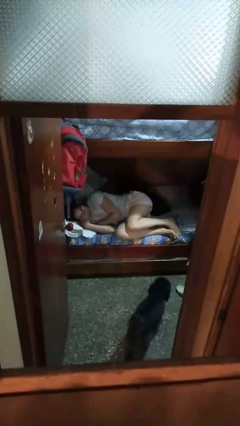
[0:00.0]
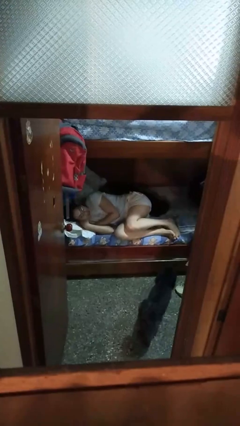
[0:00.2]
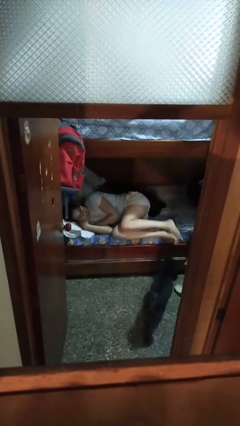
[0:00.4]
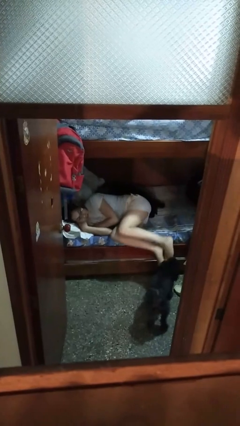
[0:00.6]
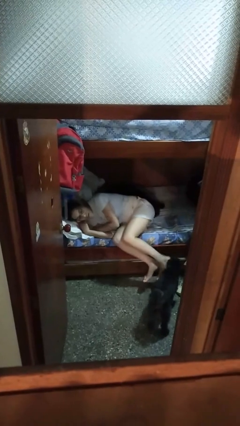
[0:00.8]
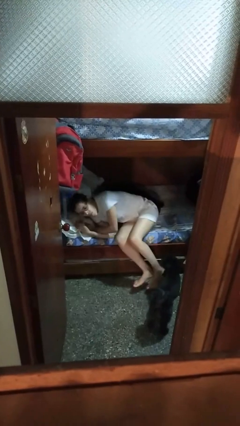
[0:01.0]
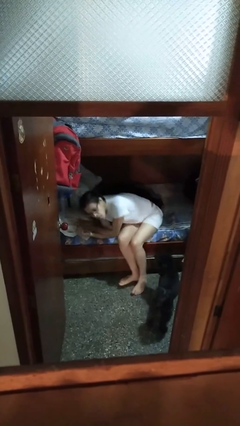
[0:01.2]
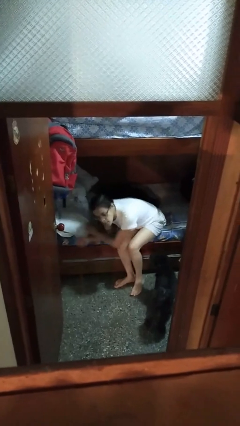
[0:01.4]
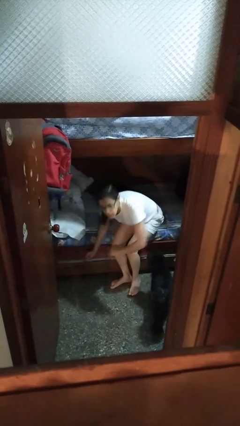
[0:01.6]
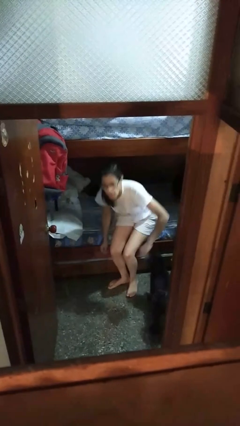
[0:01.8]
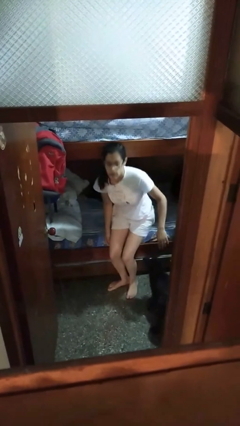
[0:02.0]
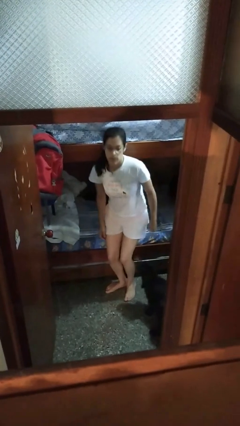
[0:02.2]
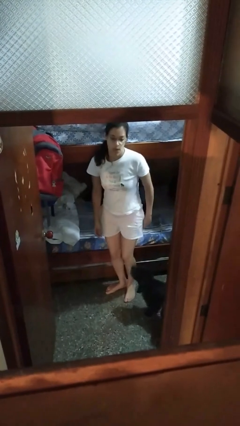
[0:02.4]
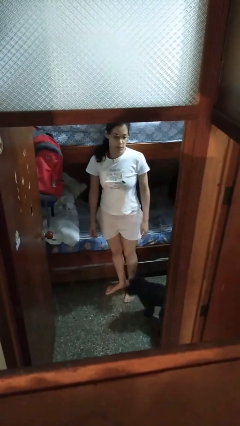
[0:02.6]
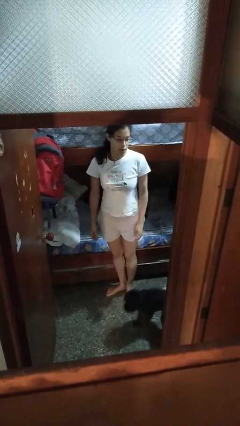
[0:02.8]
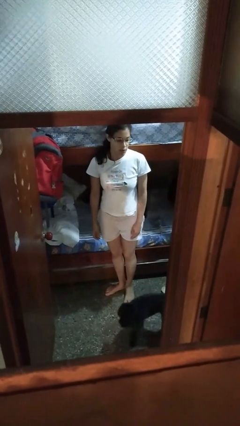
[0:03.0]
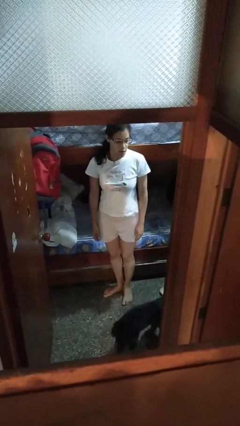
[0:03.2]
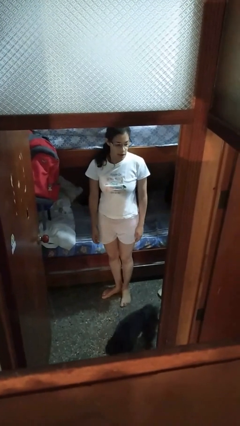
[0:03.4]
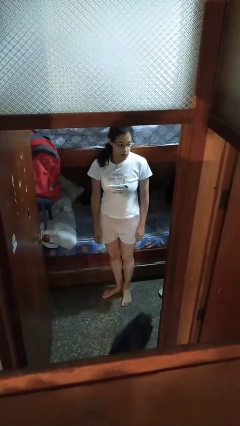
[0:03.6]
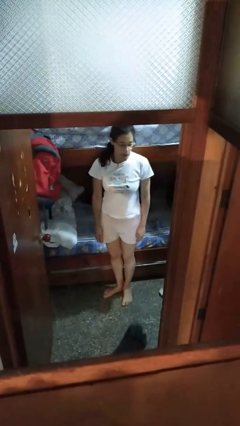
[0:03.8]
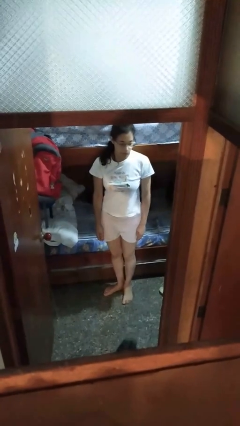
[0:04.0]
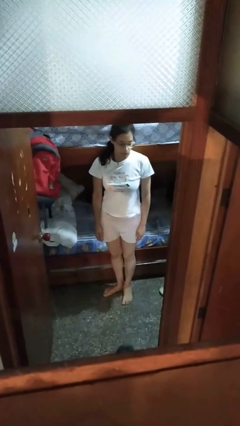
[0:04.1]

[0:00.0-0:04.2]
person stands up

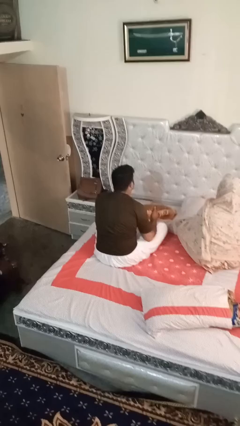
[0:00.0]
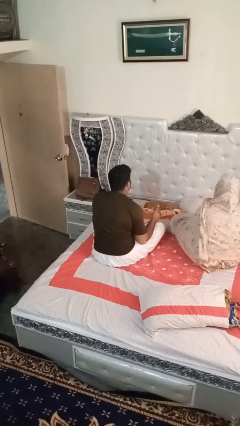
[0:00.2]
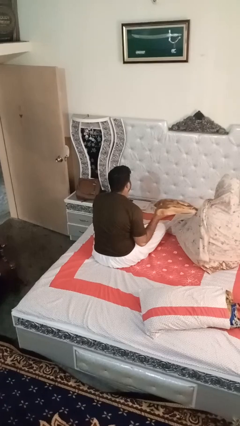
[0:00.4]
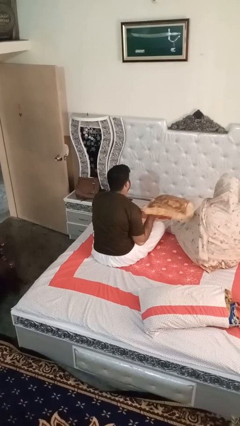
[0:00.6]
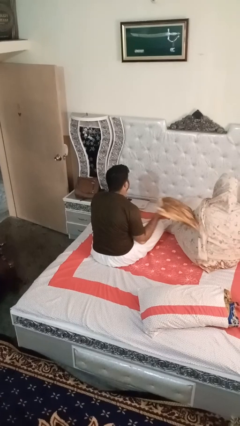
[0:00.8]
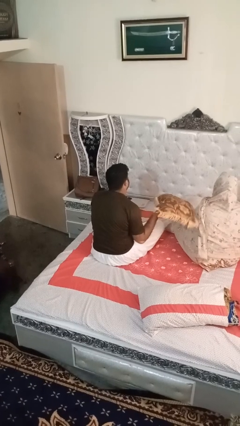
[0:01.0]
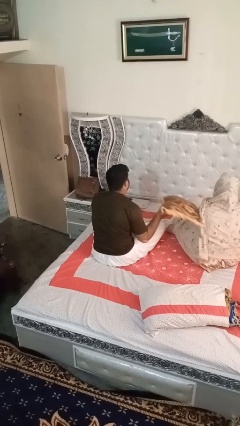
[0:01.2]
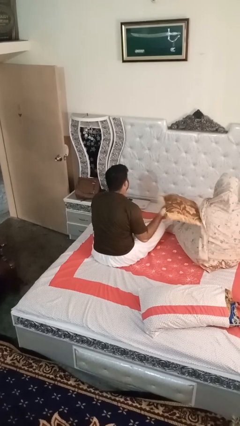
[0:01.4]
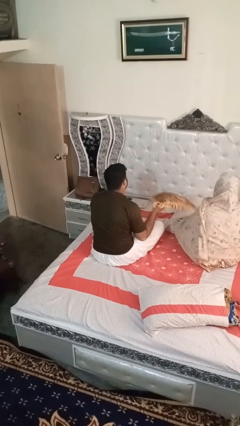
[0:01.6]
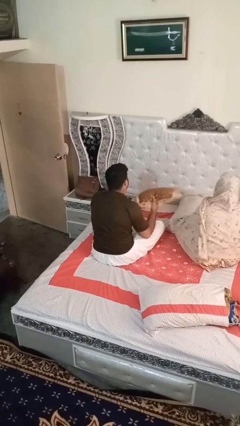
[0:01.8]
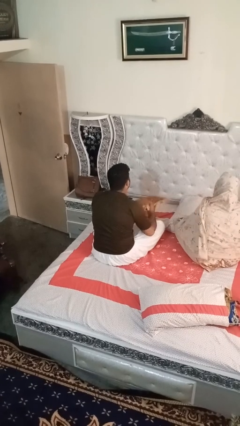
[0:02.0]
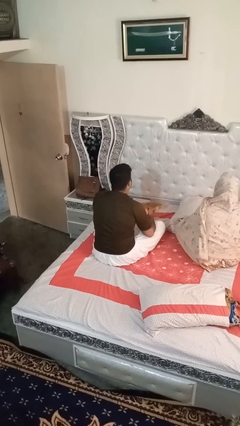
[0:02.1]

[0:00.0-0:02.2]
person hits person with pillow

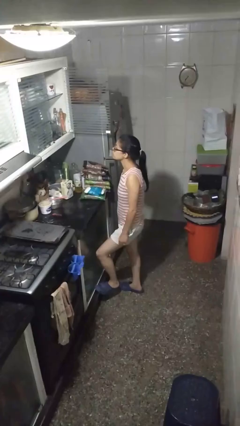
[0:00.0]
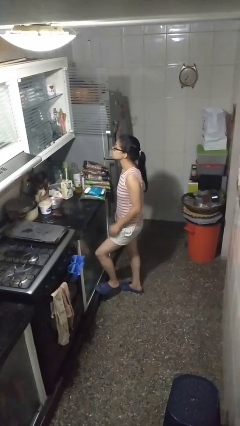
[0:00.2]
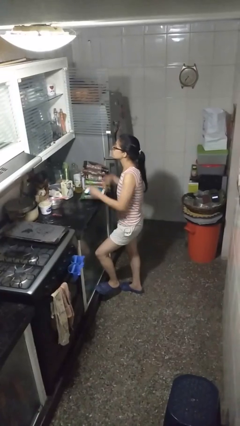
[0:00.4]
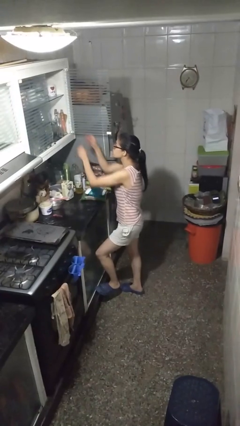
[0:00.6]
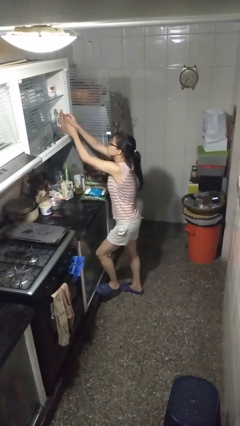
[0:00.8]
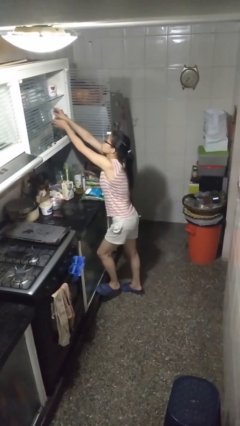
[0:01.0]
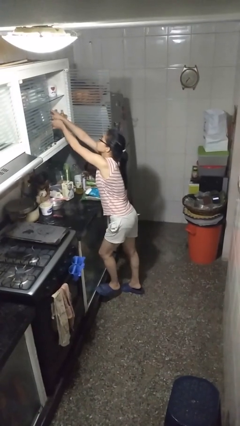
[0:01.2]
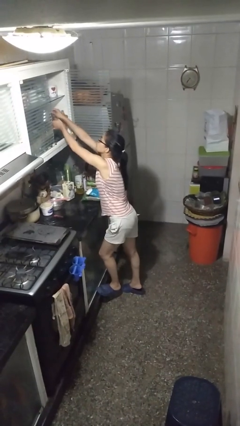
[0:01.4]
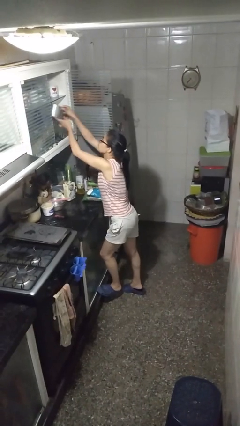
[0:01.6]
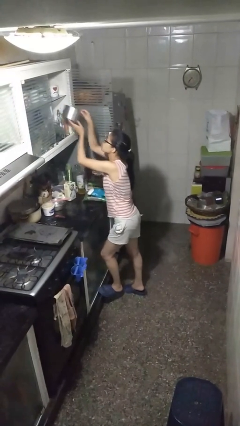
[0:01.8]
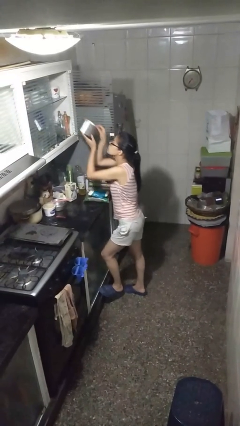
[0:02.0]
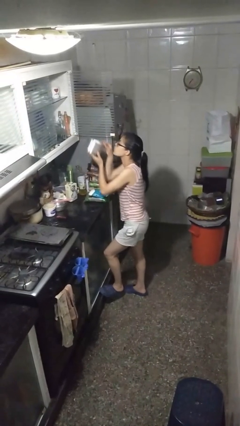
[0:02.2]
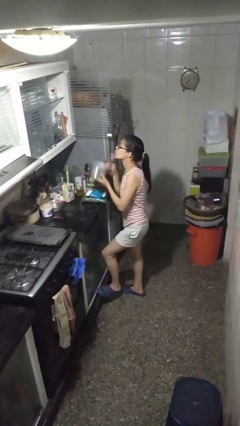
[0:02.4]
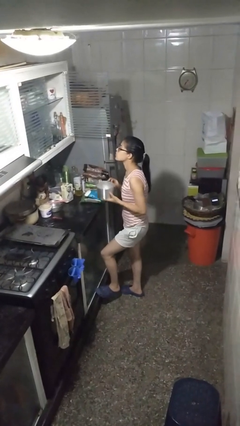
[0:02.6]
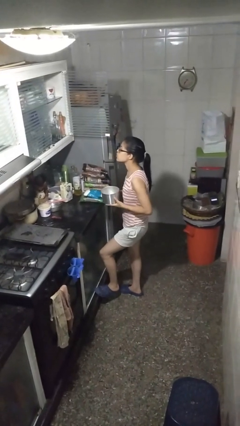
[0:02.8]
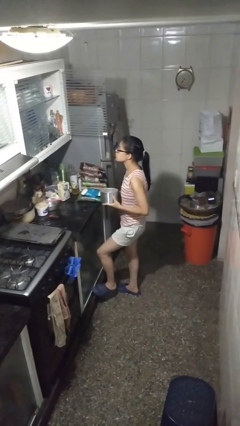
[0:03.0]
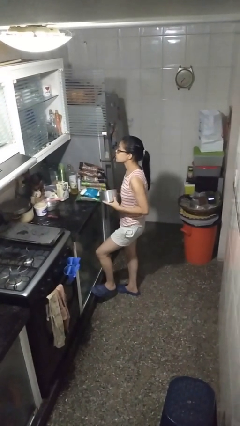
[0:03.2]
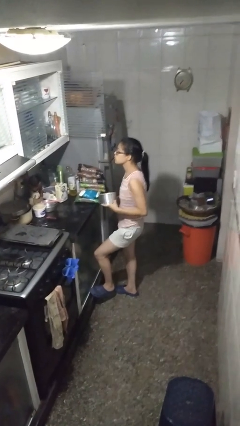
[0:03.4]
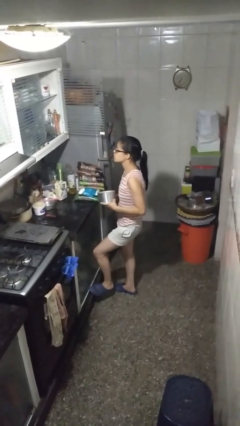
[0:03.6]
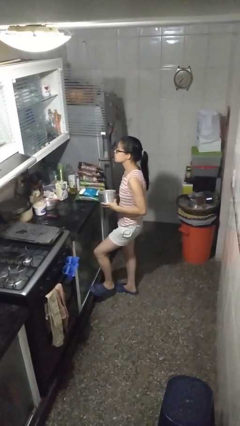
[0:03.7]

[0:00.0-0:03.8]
person picks up object from cabinet

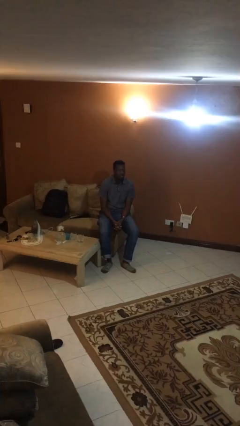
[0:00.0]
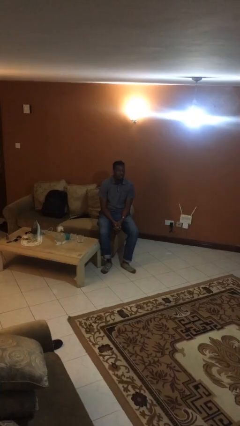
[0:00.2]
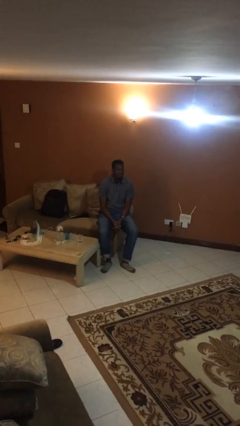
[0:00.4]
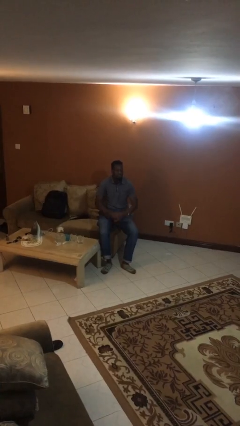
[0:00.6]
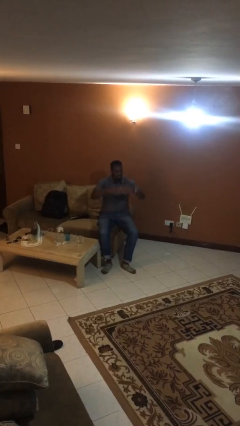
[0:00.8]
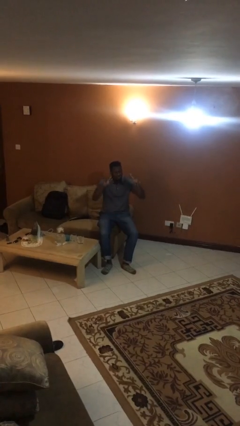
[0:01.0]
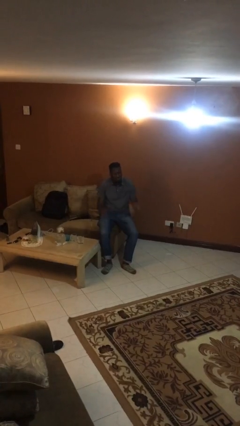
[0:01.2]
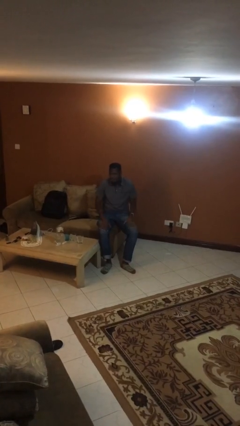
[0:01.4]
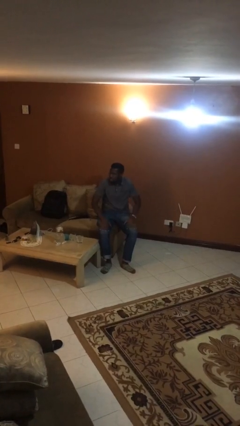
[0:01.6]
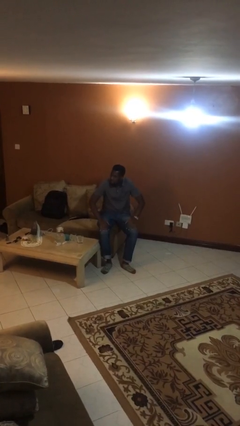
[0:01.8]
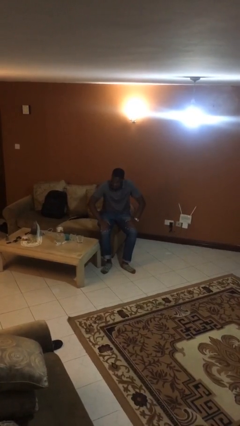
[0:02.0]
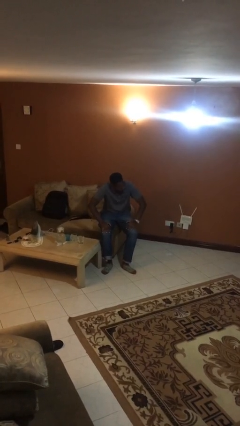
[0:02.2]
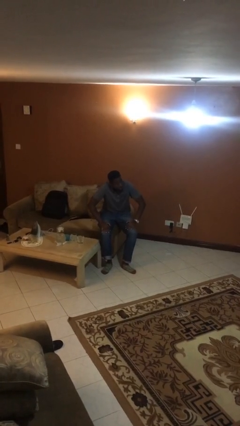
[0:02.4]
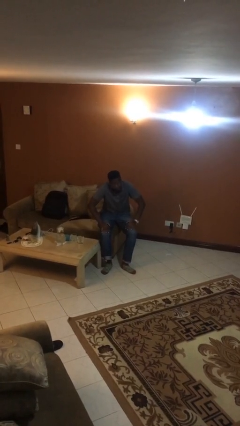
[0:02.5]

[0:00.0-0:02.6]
person slaps hands on thighs

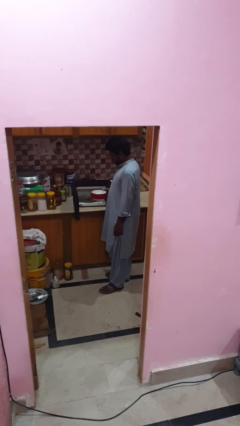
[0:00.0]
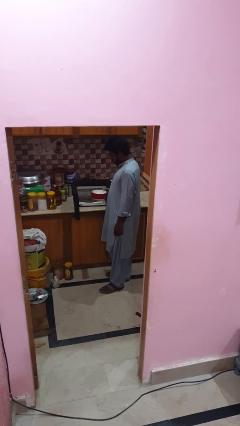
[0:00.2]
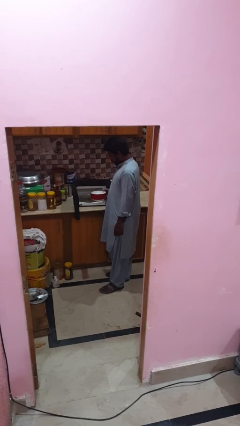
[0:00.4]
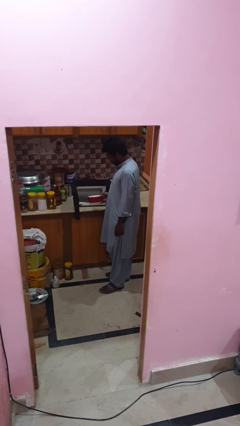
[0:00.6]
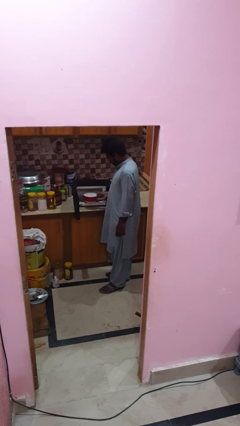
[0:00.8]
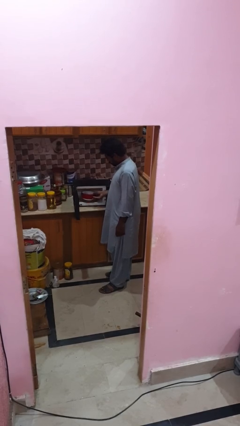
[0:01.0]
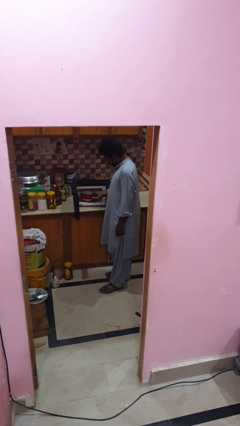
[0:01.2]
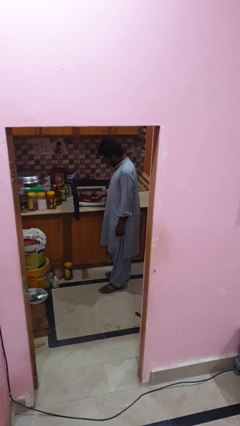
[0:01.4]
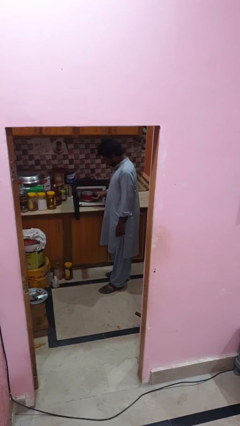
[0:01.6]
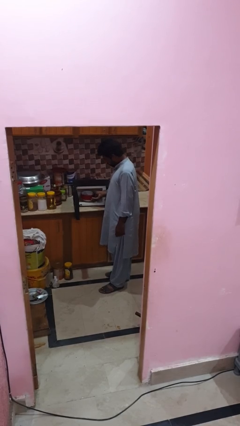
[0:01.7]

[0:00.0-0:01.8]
person puts object into microwave

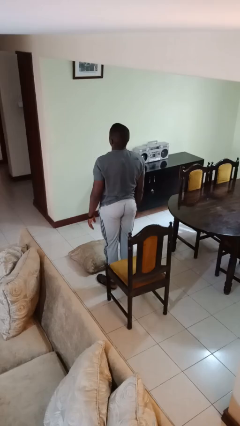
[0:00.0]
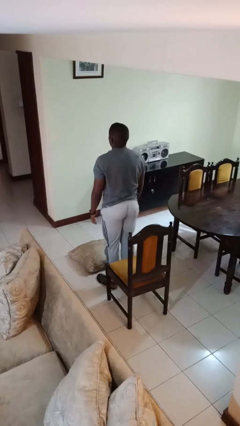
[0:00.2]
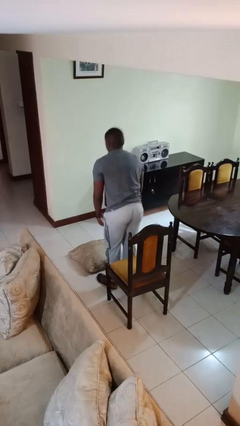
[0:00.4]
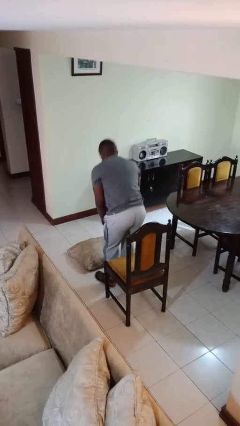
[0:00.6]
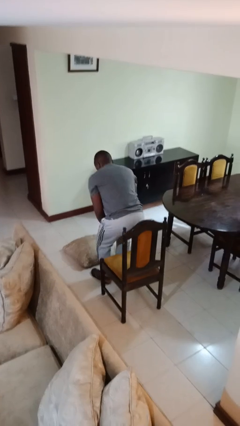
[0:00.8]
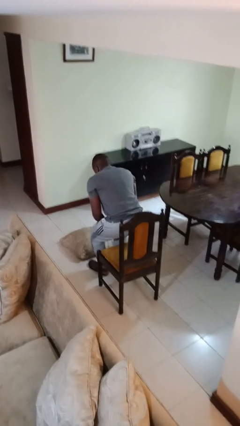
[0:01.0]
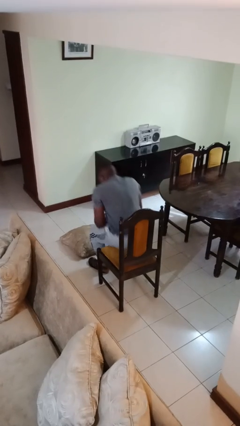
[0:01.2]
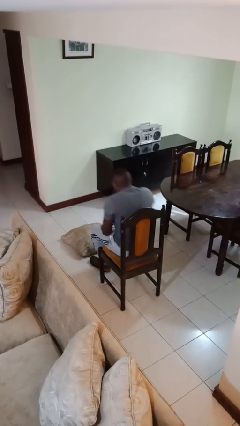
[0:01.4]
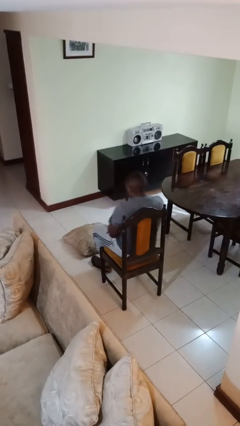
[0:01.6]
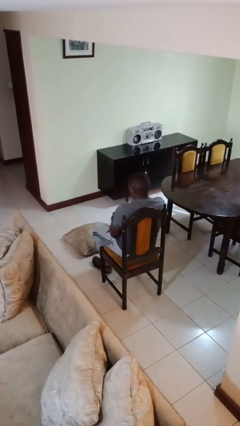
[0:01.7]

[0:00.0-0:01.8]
person sits down

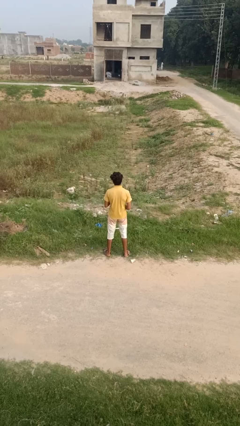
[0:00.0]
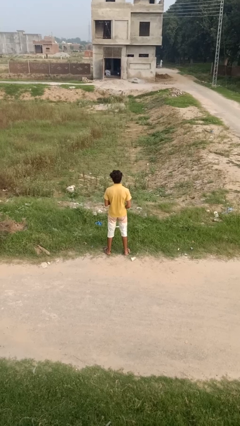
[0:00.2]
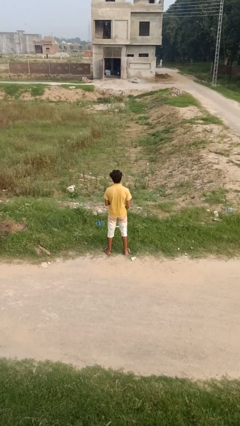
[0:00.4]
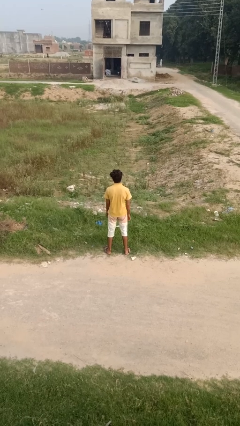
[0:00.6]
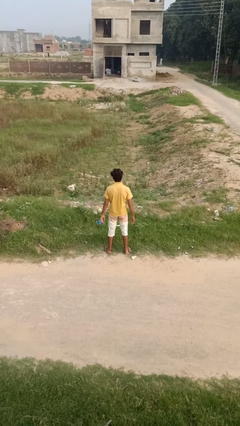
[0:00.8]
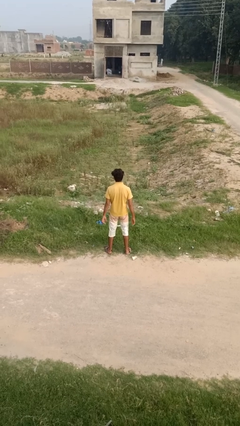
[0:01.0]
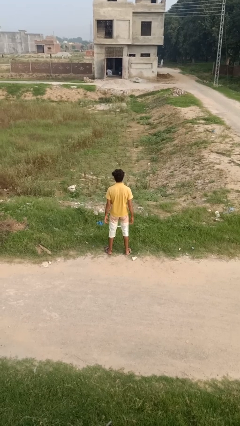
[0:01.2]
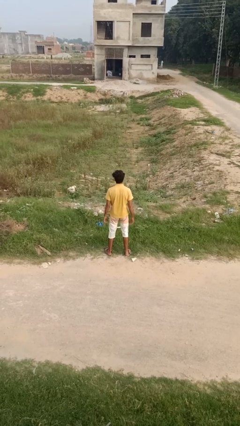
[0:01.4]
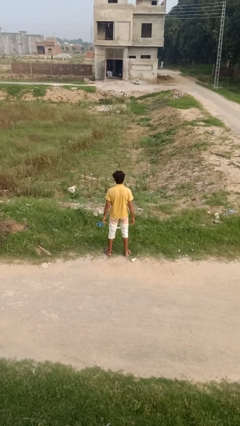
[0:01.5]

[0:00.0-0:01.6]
person buttons shirt
